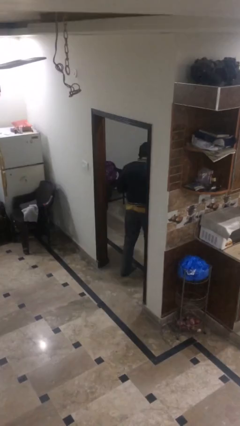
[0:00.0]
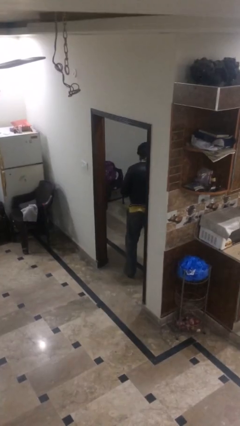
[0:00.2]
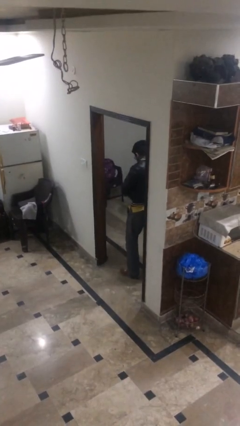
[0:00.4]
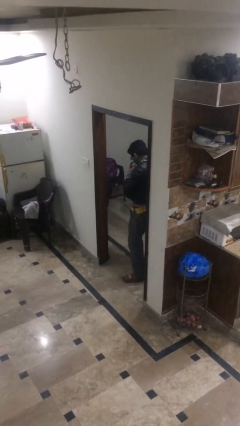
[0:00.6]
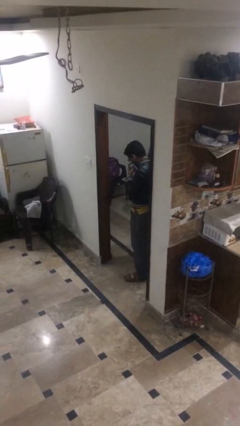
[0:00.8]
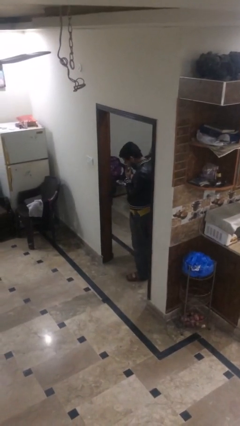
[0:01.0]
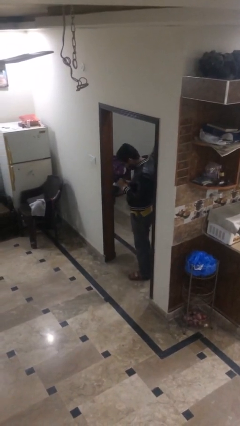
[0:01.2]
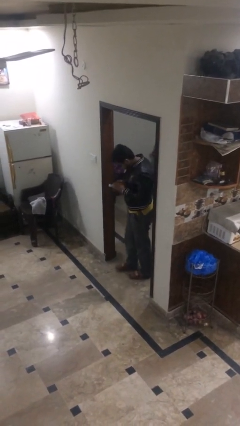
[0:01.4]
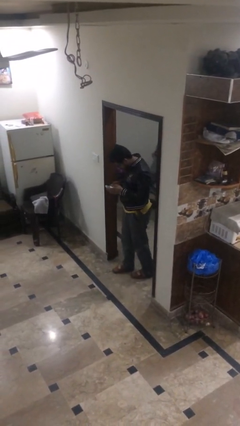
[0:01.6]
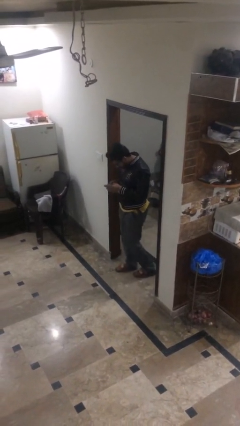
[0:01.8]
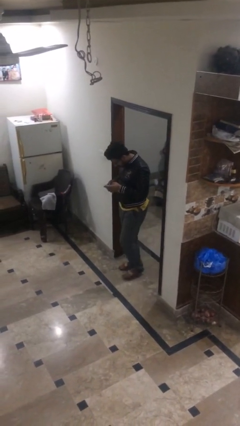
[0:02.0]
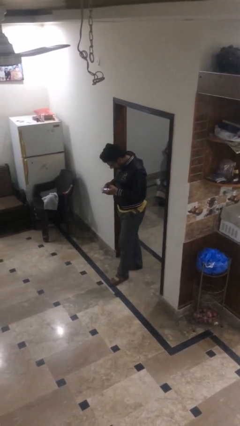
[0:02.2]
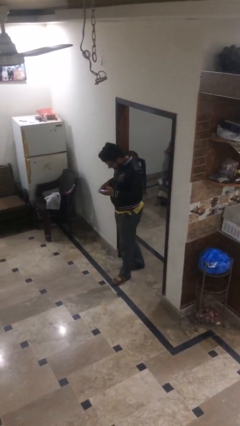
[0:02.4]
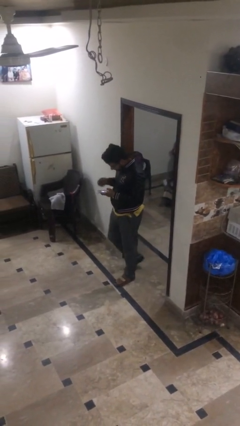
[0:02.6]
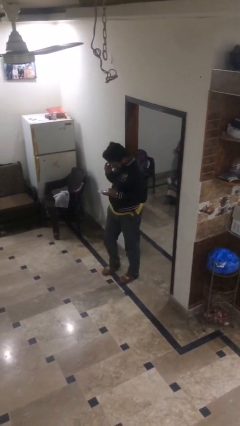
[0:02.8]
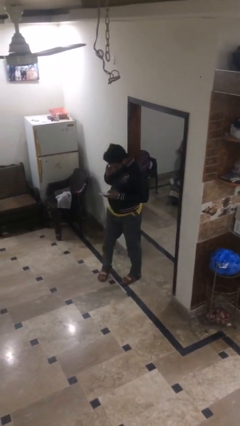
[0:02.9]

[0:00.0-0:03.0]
person exits scene through structure

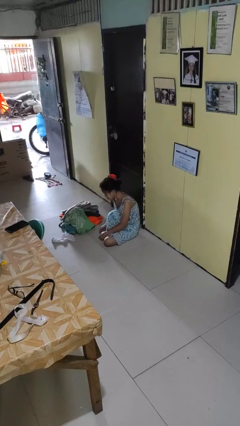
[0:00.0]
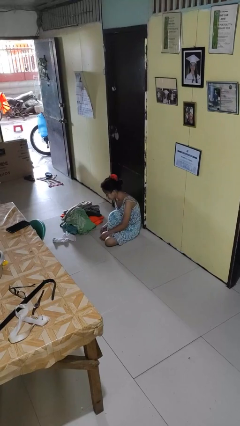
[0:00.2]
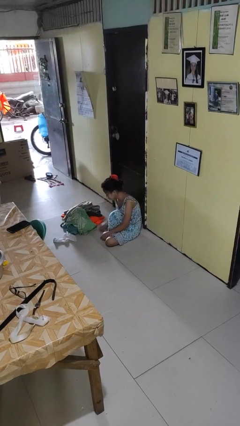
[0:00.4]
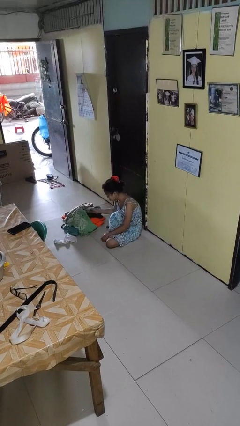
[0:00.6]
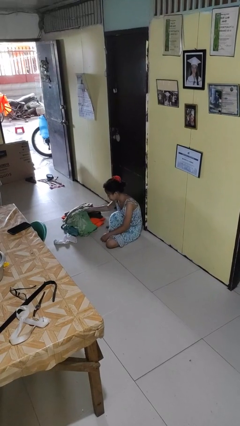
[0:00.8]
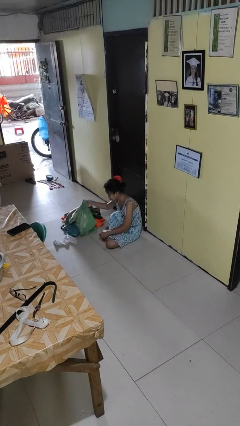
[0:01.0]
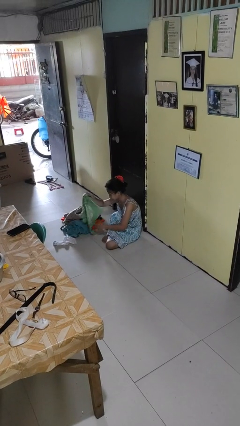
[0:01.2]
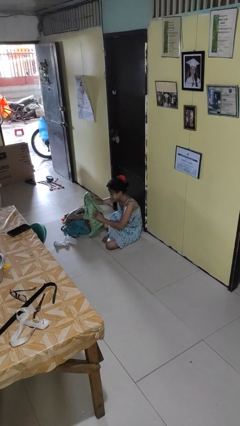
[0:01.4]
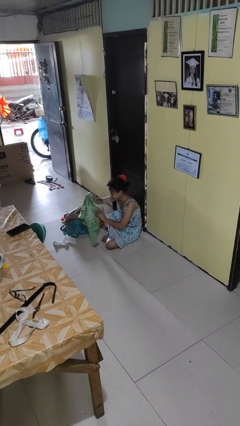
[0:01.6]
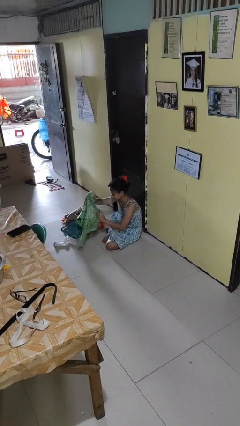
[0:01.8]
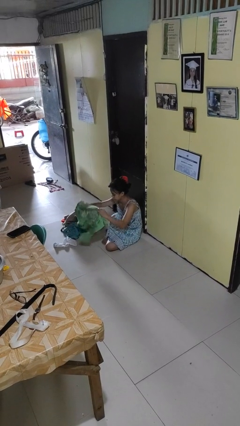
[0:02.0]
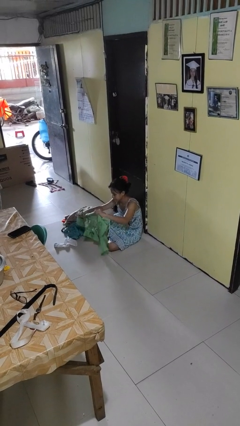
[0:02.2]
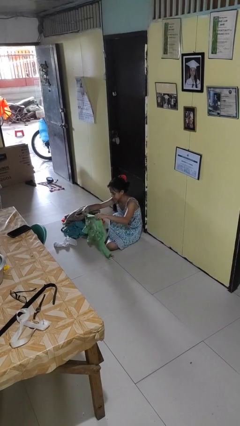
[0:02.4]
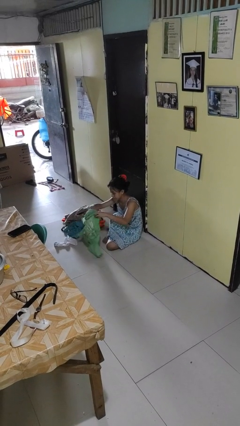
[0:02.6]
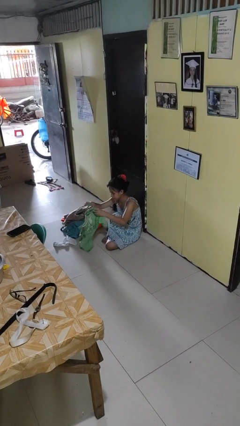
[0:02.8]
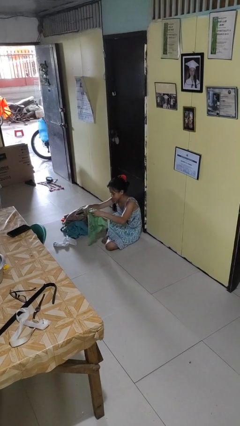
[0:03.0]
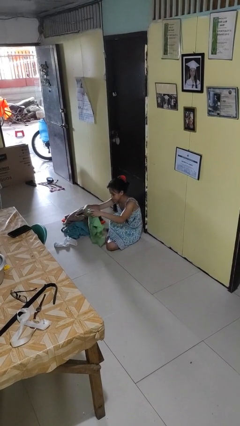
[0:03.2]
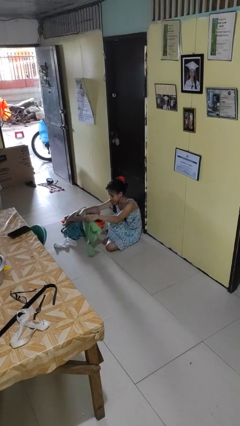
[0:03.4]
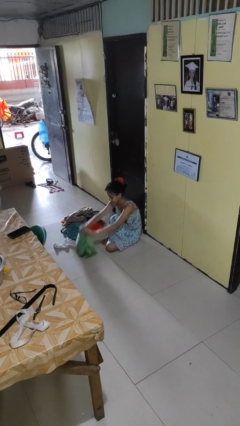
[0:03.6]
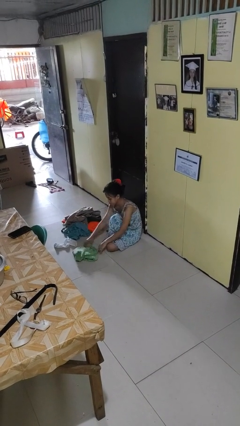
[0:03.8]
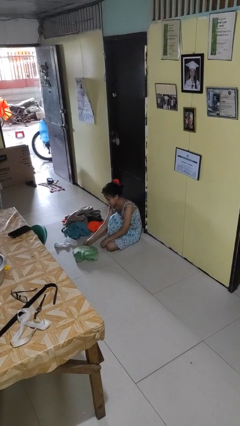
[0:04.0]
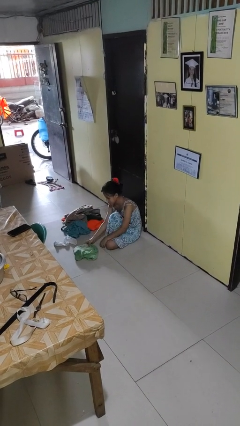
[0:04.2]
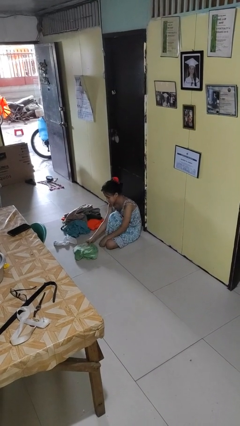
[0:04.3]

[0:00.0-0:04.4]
person folds shirt

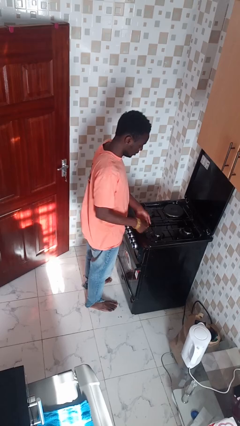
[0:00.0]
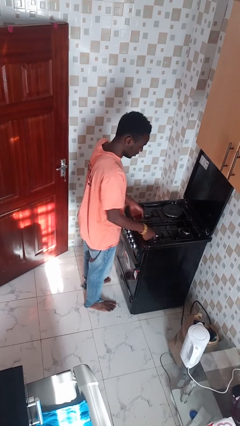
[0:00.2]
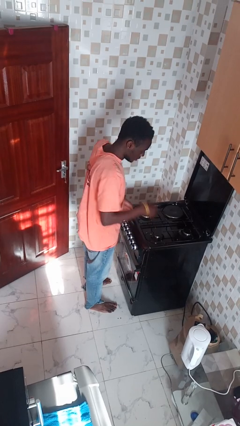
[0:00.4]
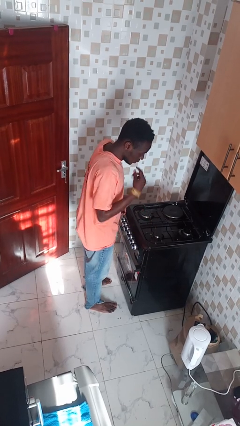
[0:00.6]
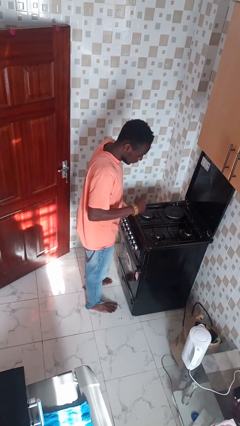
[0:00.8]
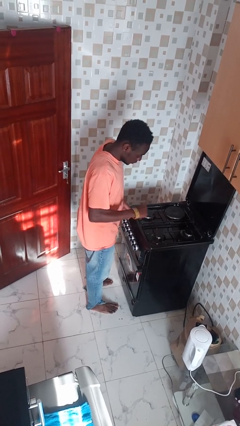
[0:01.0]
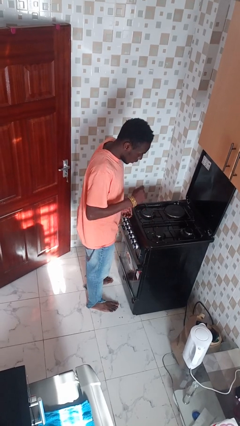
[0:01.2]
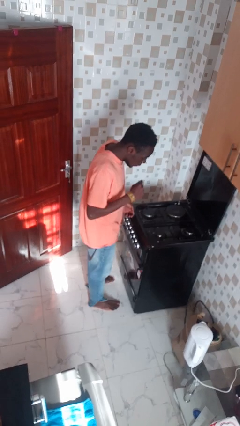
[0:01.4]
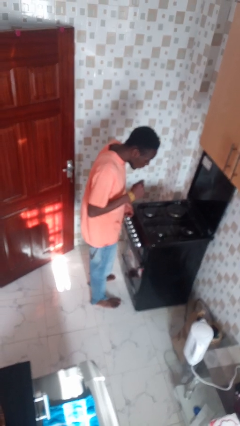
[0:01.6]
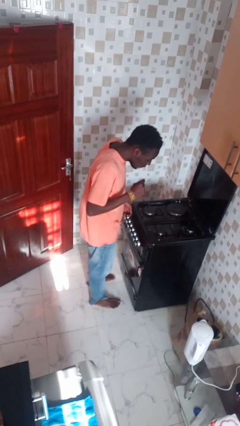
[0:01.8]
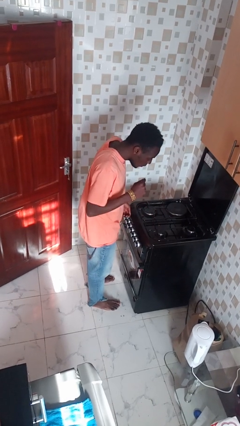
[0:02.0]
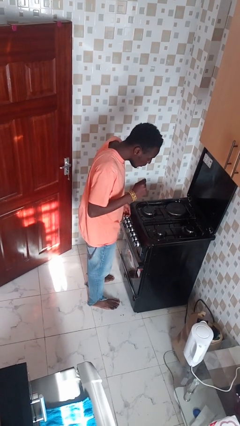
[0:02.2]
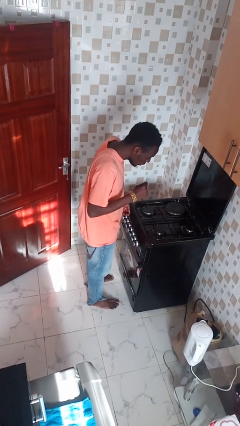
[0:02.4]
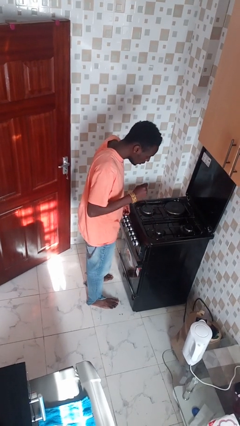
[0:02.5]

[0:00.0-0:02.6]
person burns hand

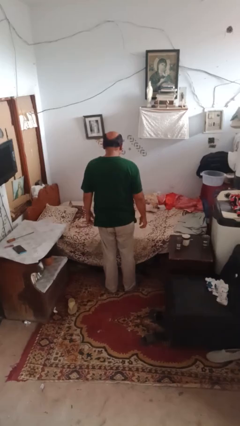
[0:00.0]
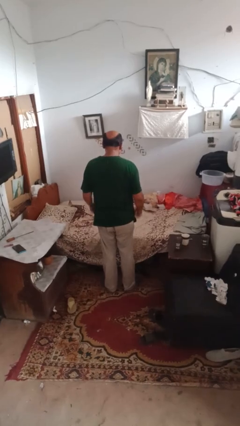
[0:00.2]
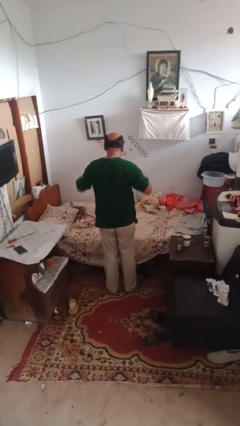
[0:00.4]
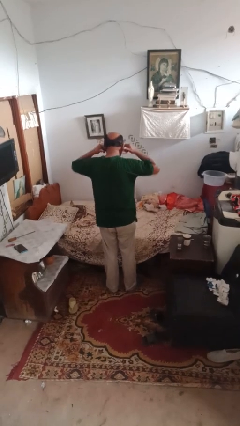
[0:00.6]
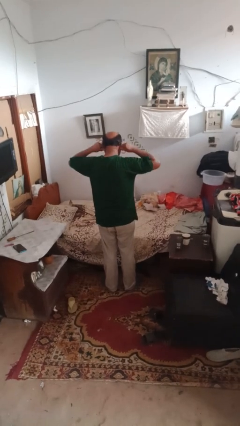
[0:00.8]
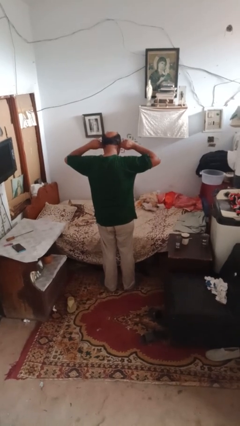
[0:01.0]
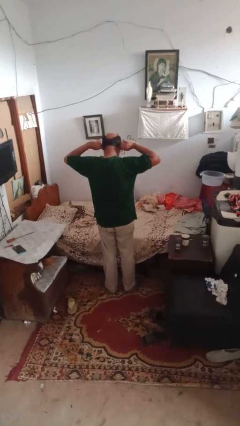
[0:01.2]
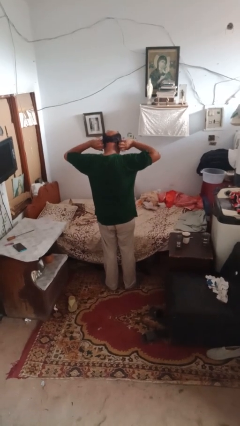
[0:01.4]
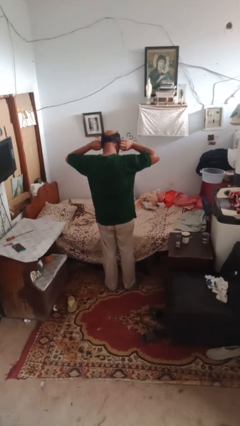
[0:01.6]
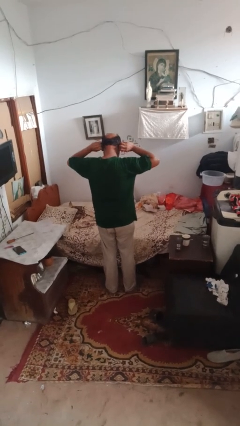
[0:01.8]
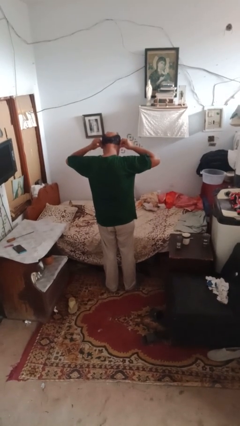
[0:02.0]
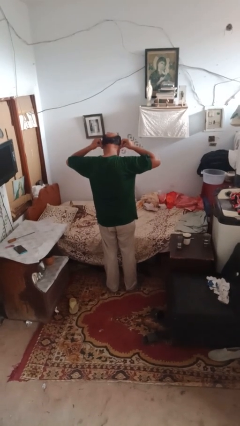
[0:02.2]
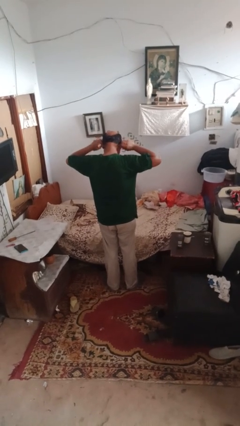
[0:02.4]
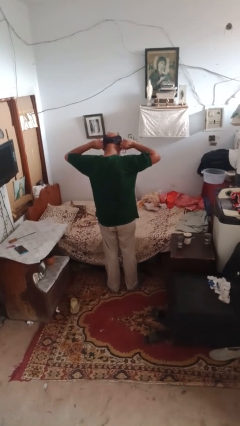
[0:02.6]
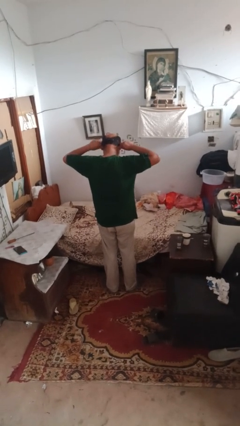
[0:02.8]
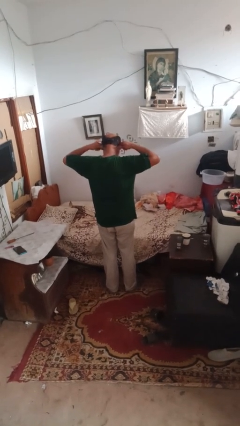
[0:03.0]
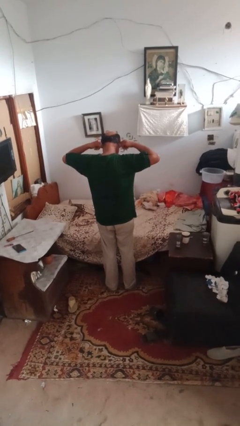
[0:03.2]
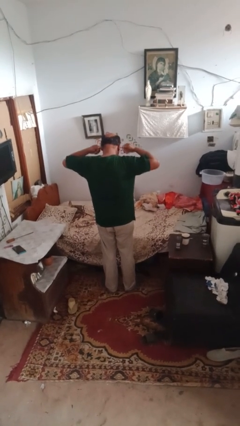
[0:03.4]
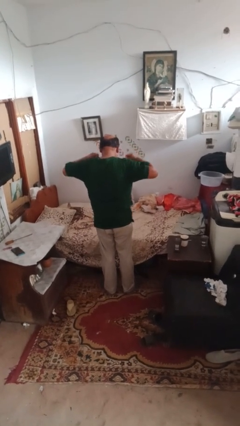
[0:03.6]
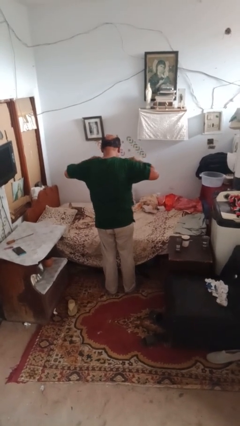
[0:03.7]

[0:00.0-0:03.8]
person touches earlobe

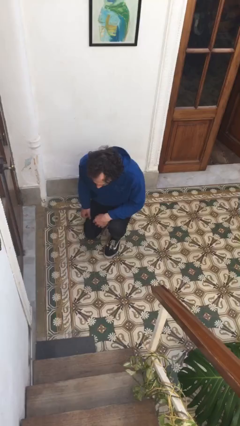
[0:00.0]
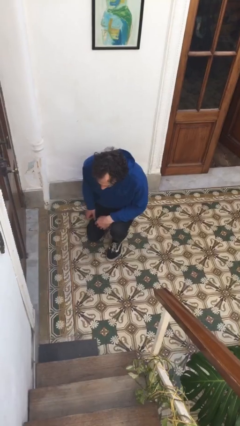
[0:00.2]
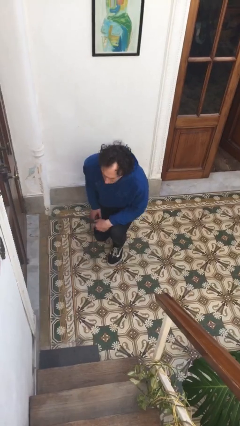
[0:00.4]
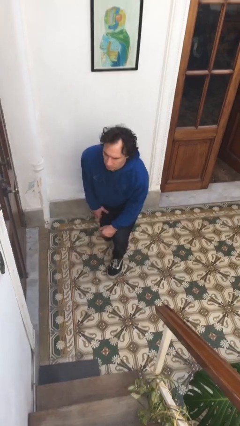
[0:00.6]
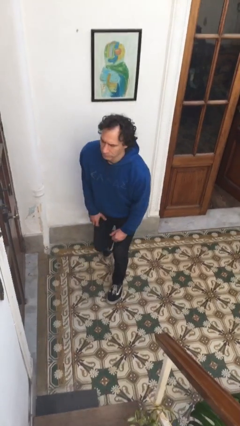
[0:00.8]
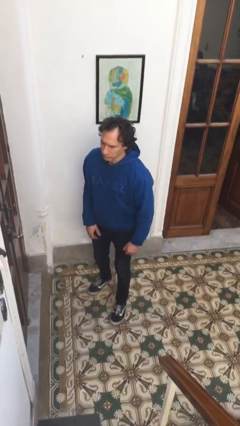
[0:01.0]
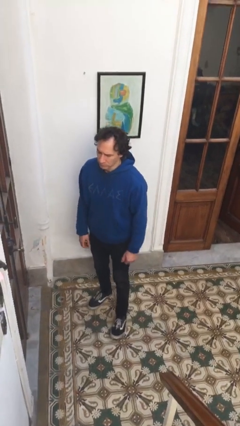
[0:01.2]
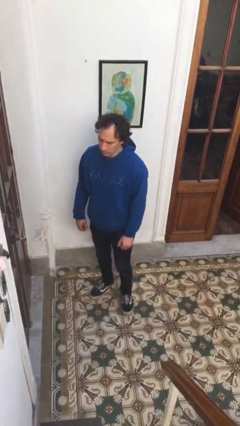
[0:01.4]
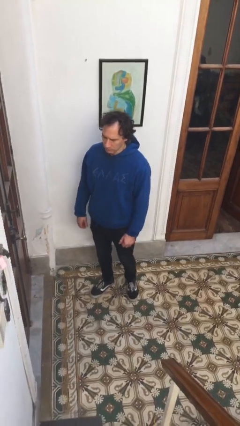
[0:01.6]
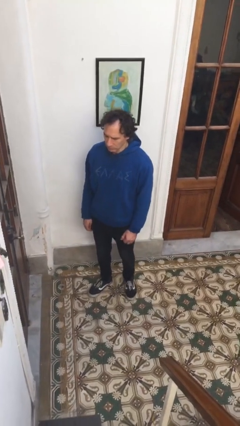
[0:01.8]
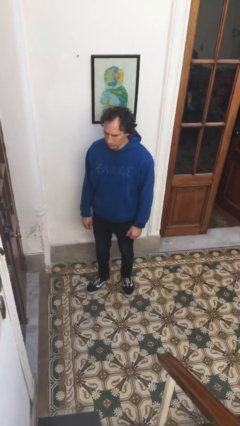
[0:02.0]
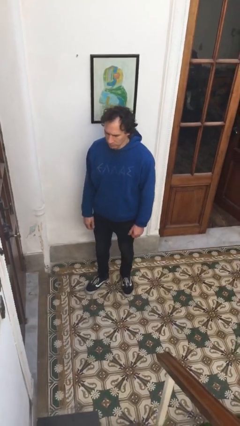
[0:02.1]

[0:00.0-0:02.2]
person stands up from floor

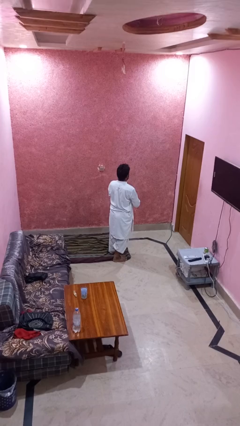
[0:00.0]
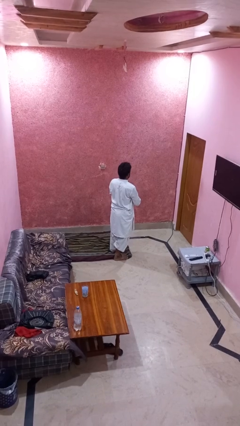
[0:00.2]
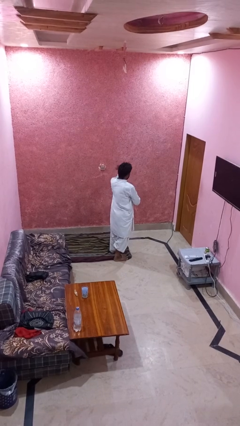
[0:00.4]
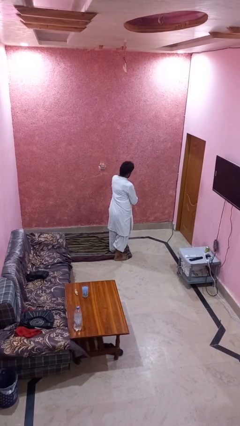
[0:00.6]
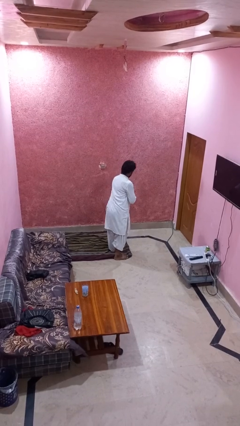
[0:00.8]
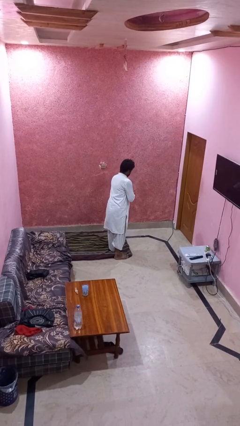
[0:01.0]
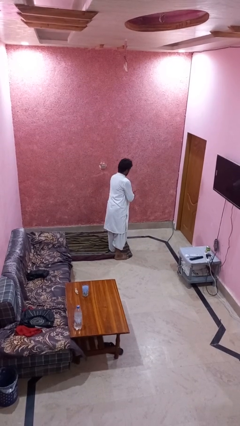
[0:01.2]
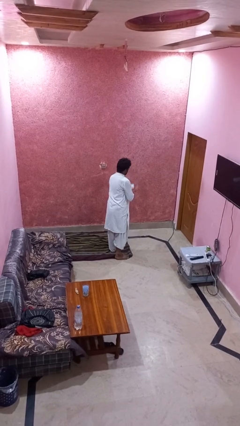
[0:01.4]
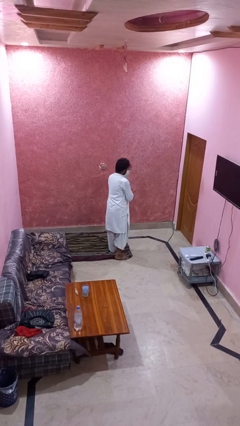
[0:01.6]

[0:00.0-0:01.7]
person karate chop
